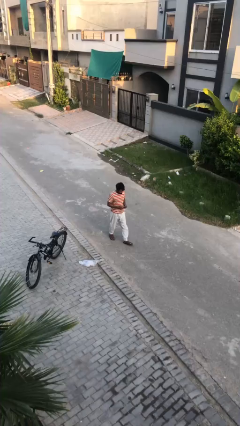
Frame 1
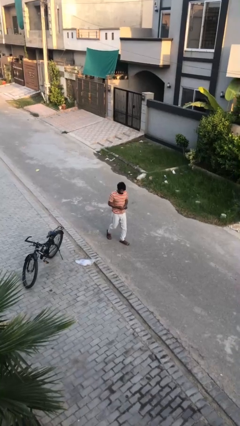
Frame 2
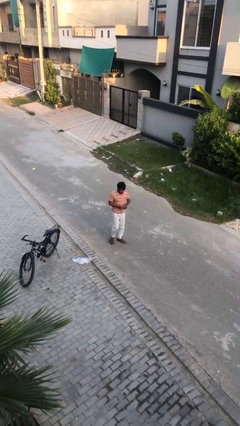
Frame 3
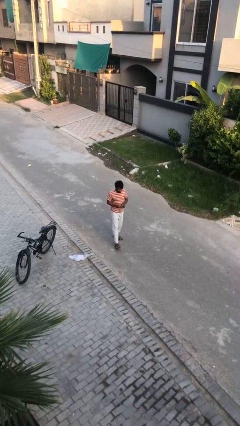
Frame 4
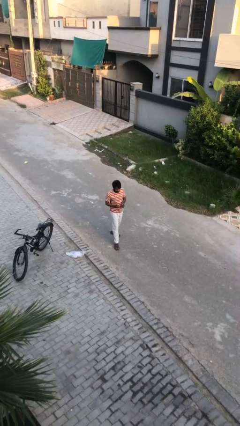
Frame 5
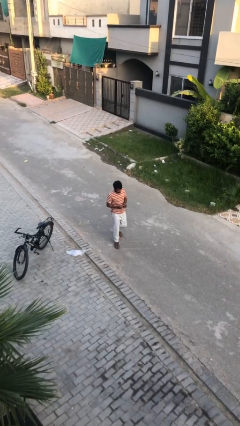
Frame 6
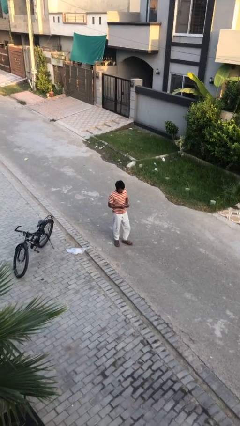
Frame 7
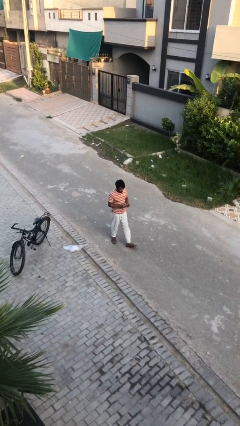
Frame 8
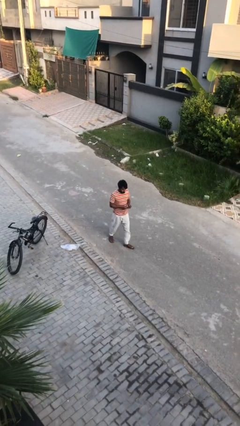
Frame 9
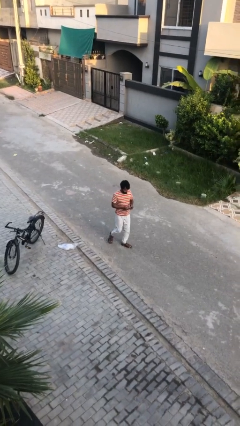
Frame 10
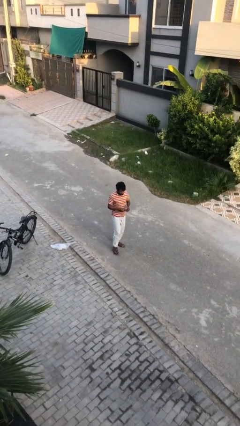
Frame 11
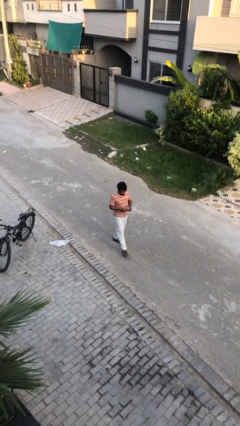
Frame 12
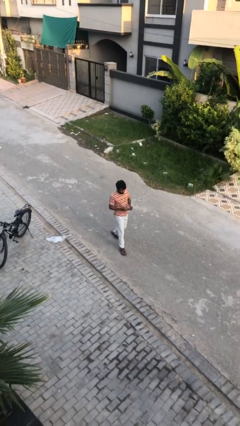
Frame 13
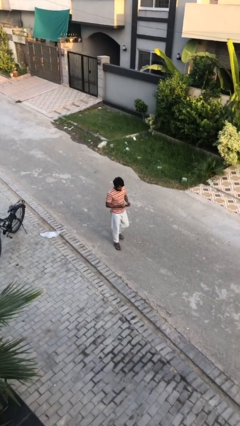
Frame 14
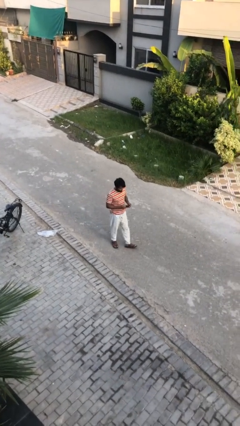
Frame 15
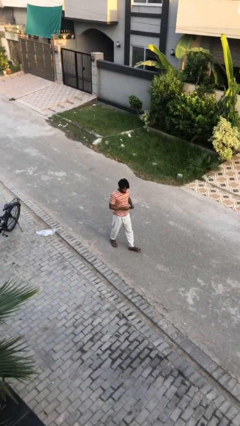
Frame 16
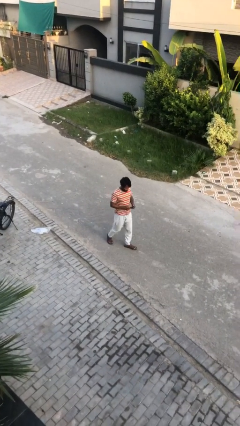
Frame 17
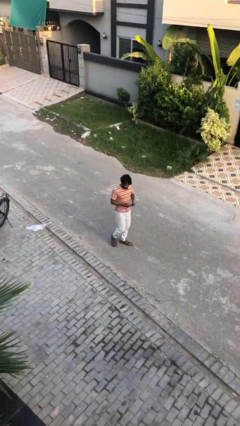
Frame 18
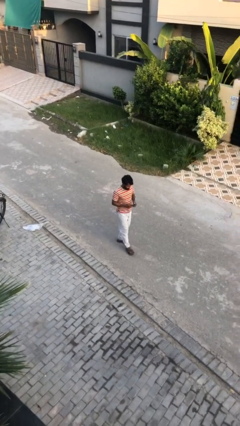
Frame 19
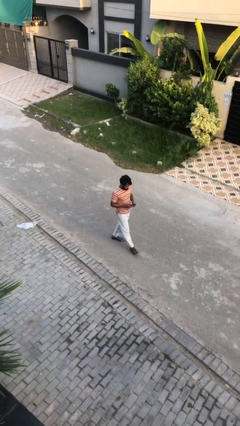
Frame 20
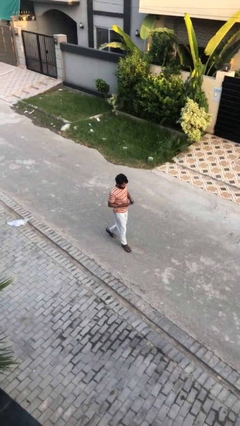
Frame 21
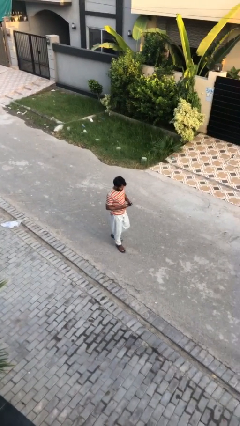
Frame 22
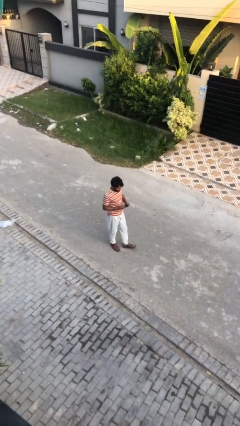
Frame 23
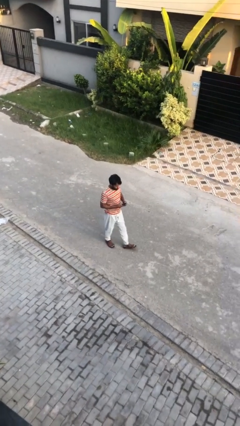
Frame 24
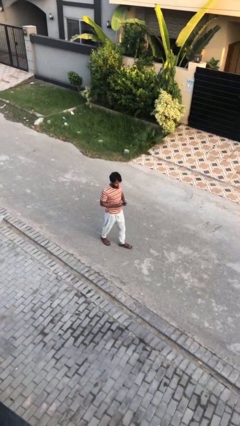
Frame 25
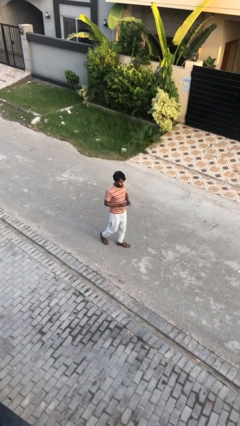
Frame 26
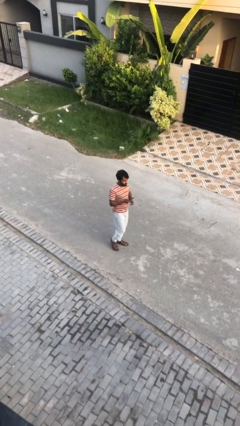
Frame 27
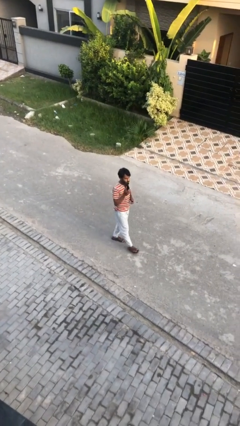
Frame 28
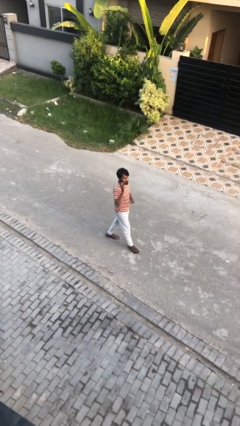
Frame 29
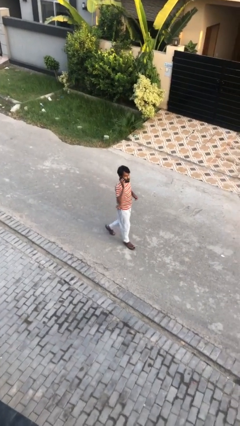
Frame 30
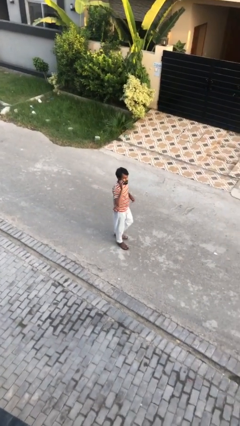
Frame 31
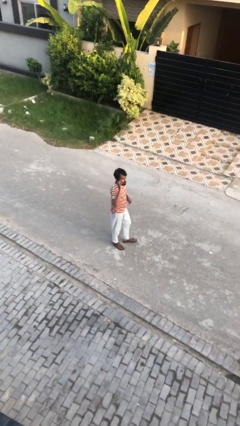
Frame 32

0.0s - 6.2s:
person texts on phone

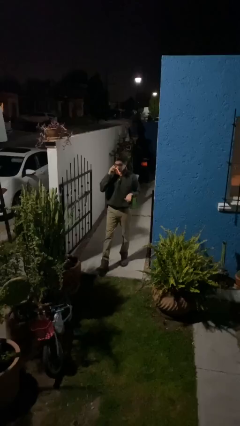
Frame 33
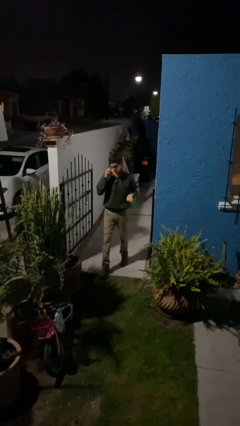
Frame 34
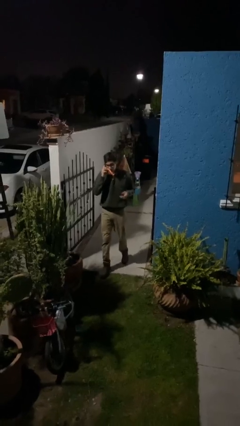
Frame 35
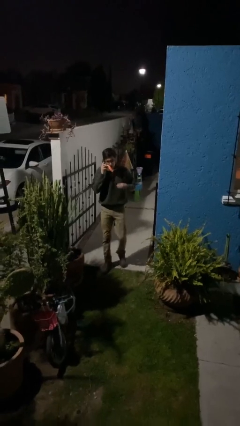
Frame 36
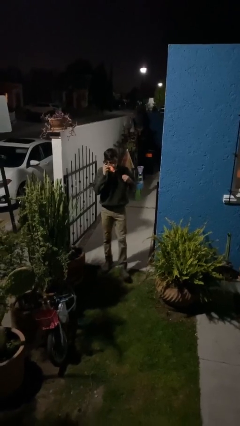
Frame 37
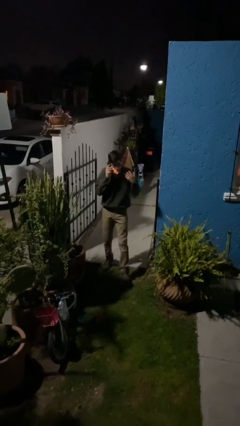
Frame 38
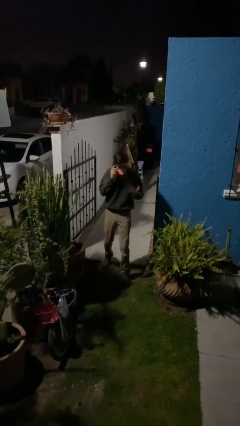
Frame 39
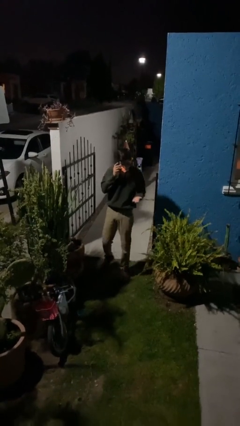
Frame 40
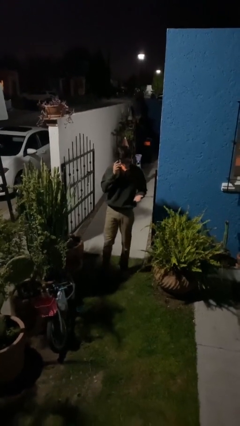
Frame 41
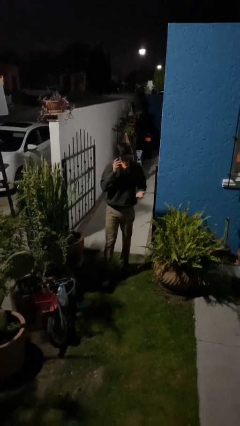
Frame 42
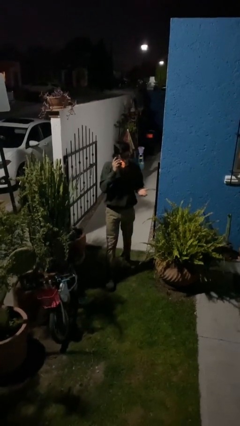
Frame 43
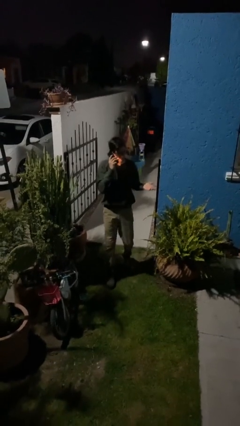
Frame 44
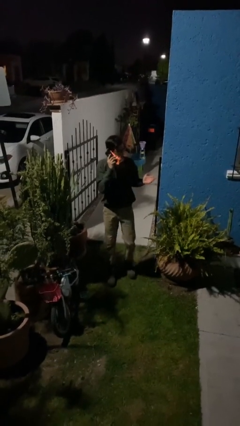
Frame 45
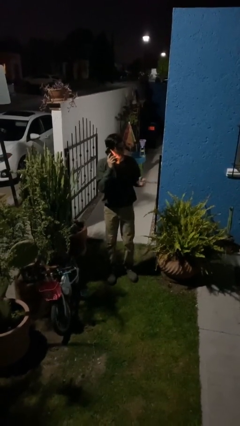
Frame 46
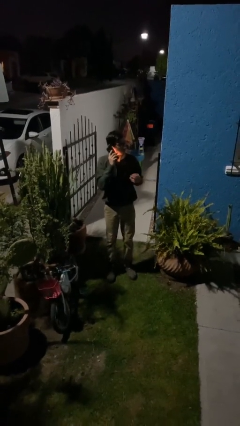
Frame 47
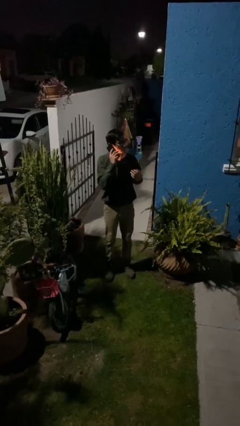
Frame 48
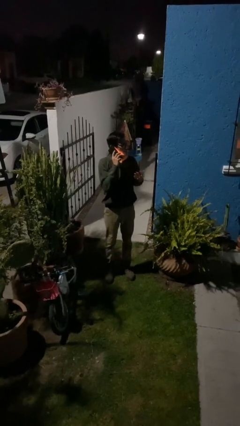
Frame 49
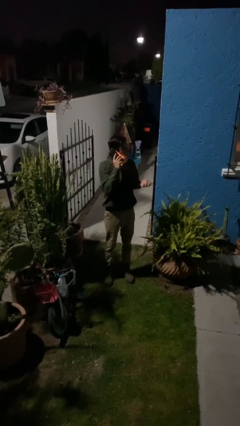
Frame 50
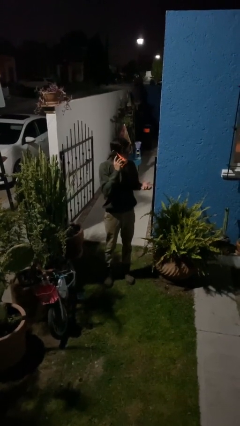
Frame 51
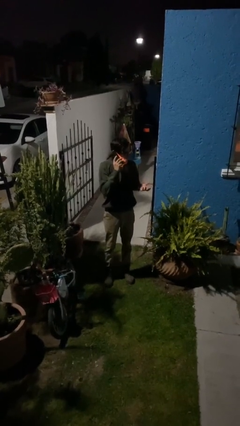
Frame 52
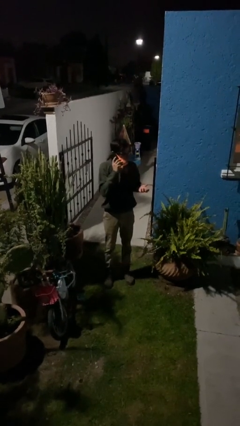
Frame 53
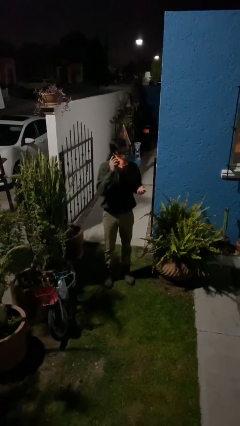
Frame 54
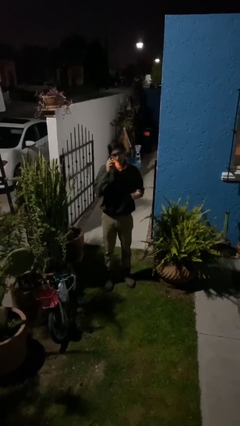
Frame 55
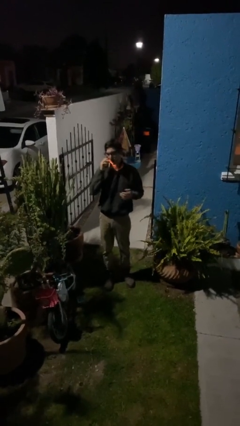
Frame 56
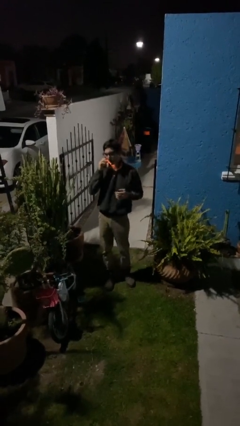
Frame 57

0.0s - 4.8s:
person enters scene through structure

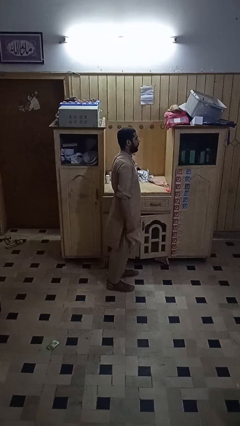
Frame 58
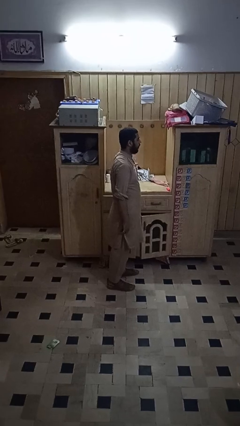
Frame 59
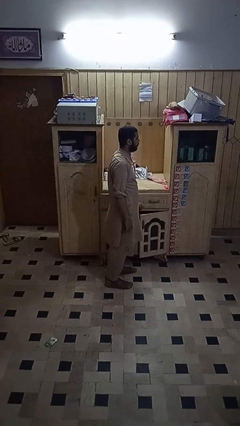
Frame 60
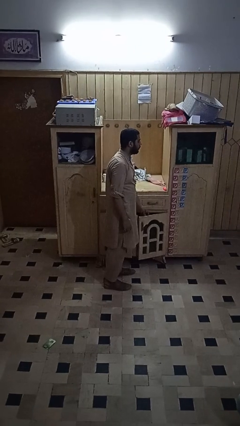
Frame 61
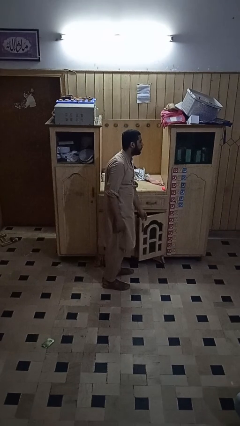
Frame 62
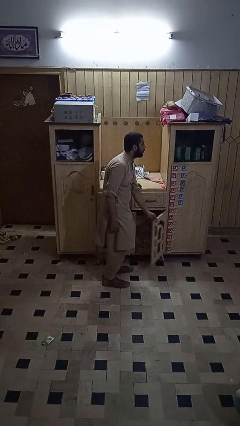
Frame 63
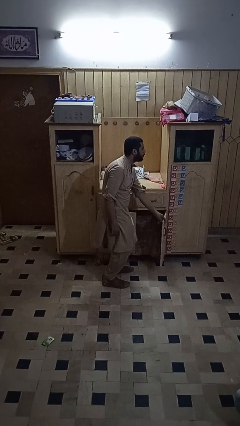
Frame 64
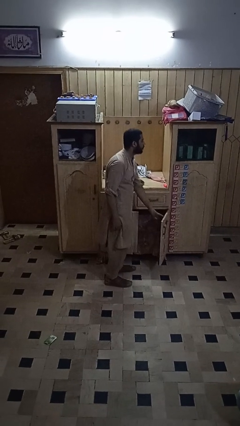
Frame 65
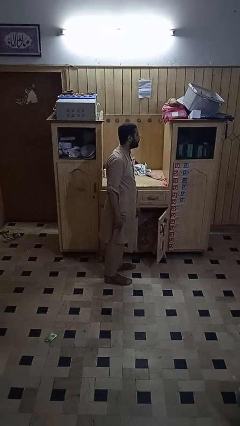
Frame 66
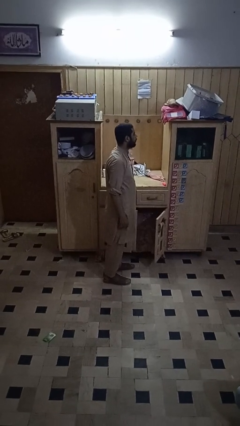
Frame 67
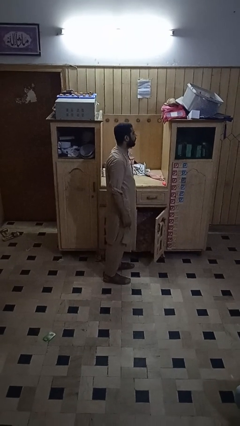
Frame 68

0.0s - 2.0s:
person closes cabinet

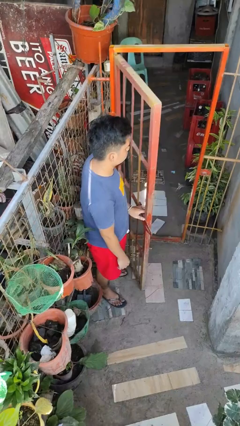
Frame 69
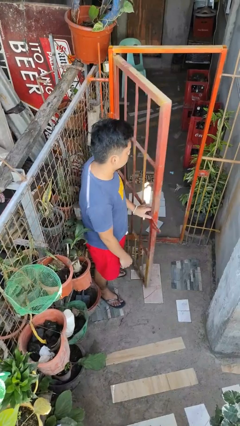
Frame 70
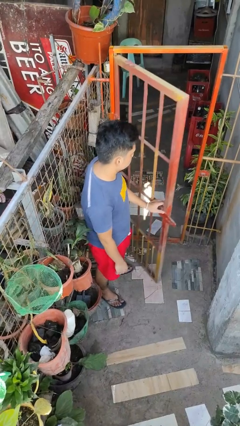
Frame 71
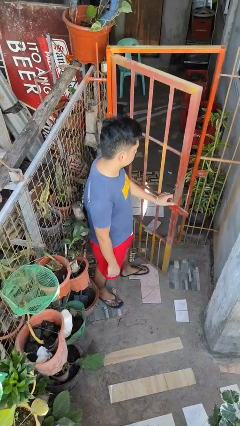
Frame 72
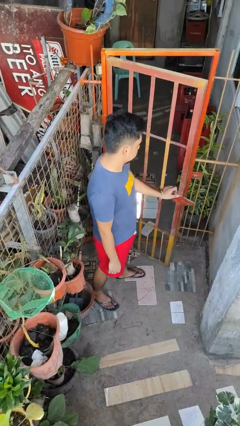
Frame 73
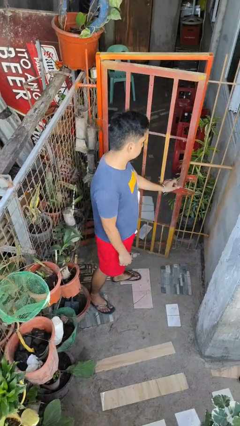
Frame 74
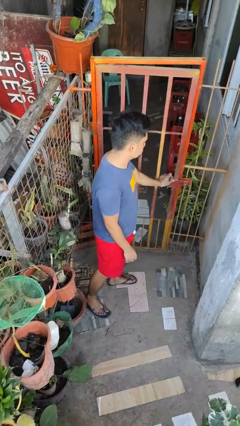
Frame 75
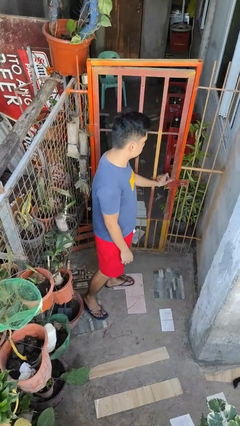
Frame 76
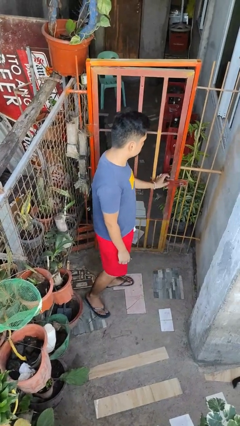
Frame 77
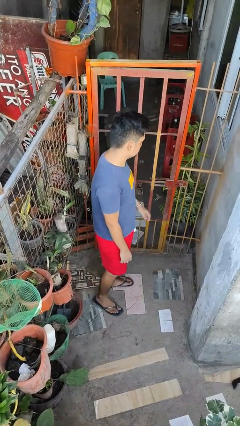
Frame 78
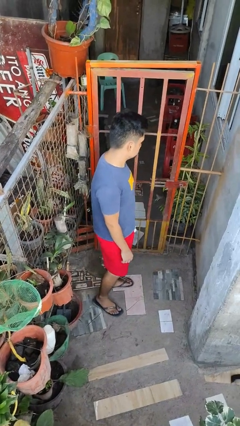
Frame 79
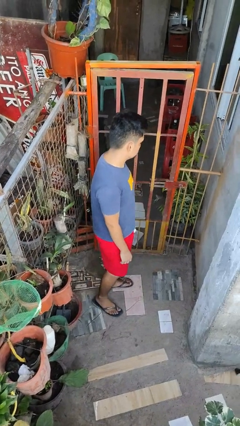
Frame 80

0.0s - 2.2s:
person closes gate

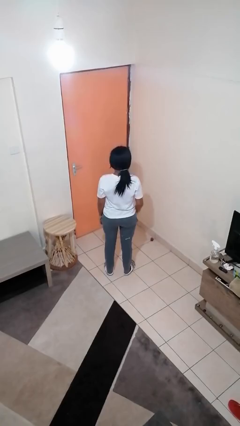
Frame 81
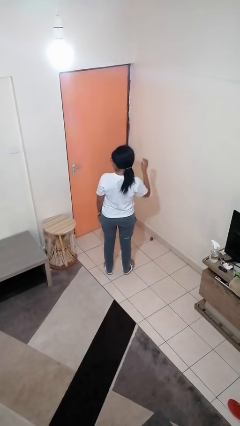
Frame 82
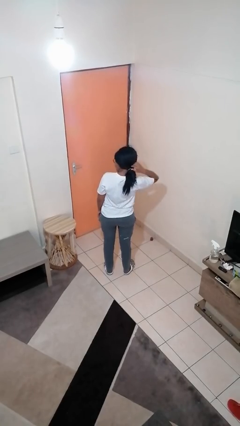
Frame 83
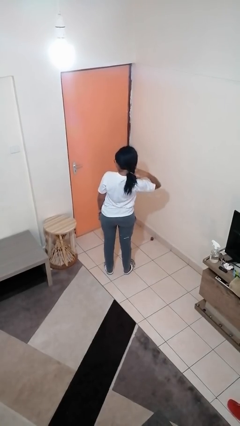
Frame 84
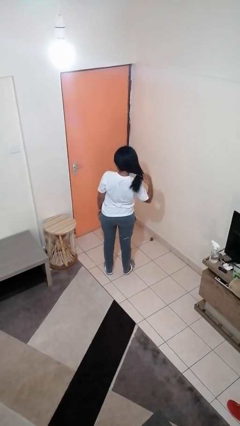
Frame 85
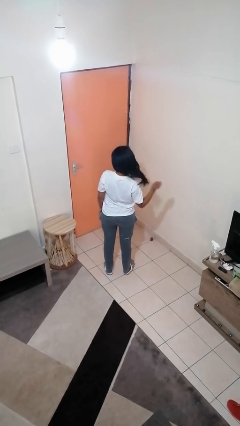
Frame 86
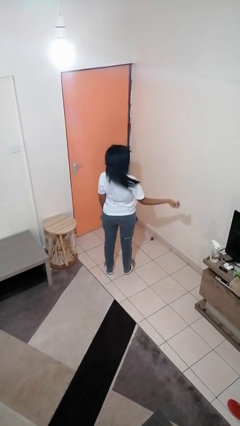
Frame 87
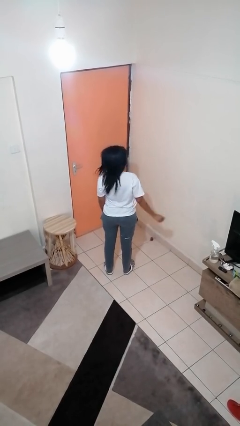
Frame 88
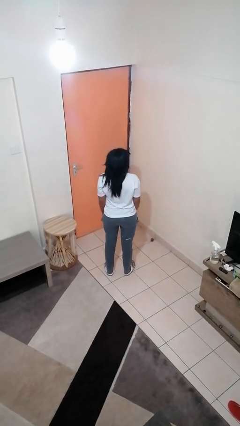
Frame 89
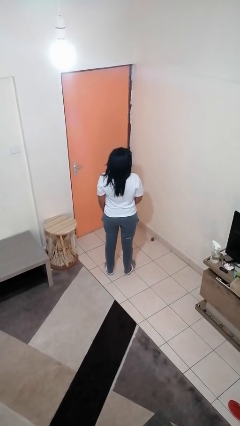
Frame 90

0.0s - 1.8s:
person takes off hairtie

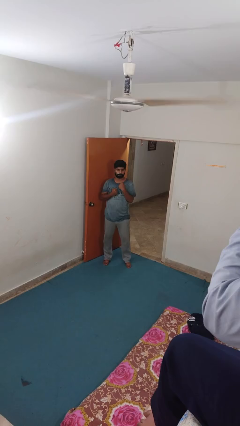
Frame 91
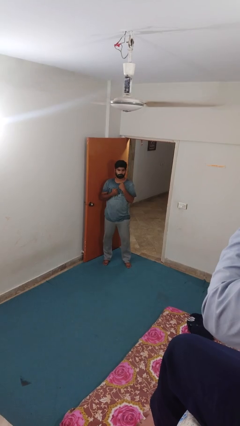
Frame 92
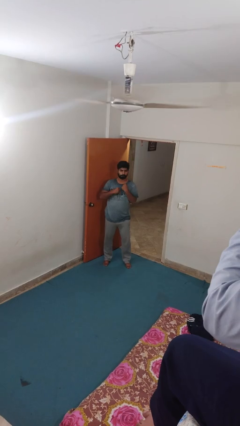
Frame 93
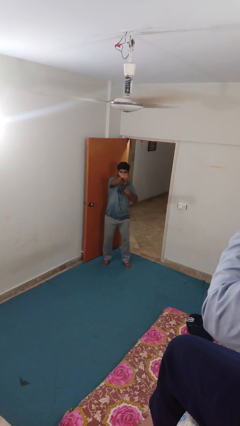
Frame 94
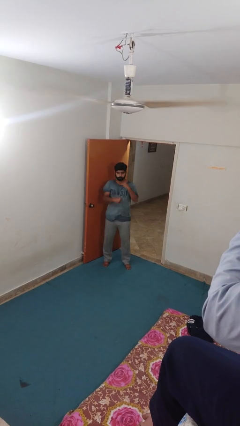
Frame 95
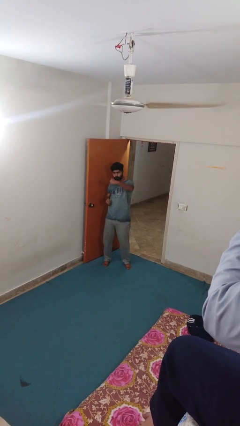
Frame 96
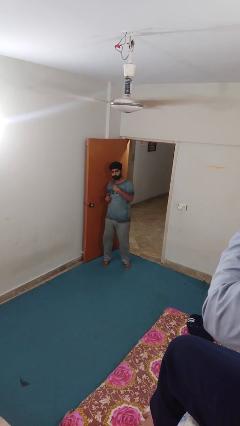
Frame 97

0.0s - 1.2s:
person punches
